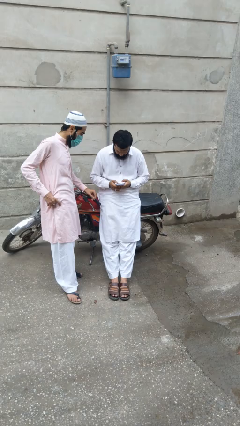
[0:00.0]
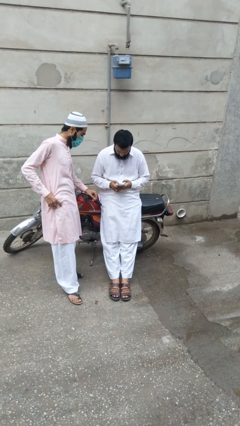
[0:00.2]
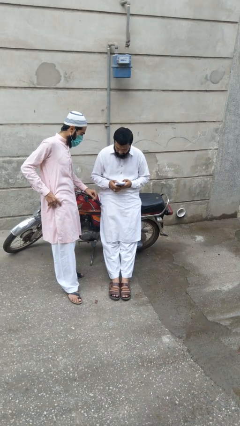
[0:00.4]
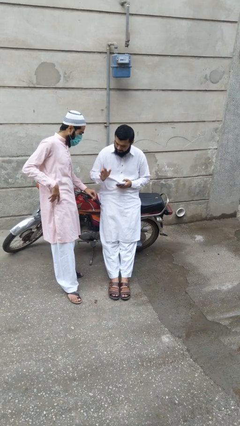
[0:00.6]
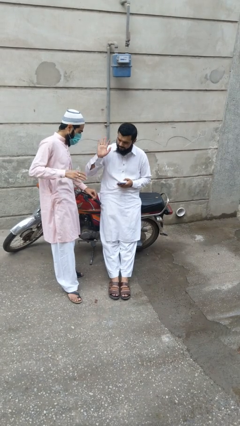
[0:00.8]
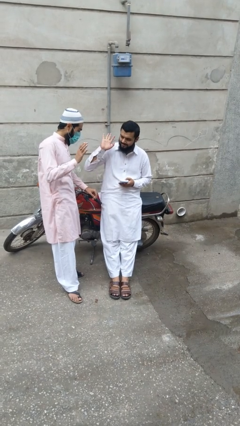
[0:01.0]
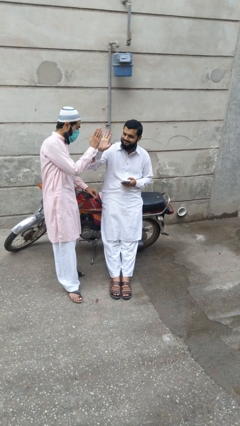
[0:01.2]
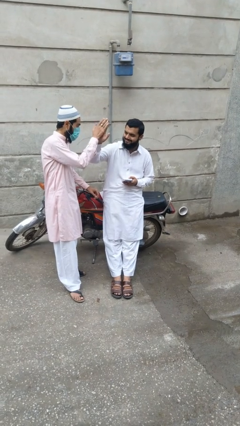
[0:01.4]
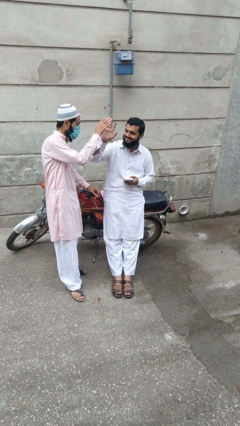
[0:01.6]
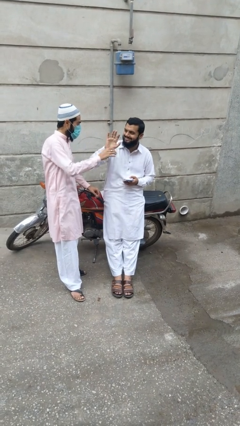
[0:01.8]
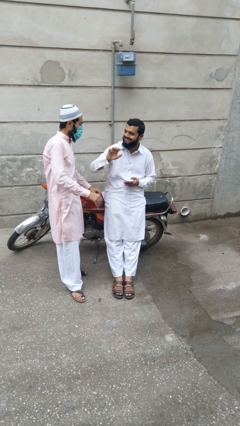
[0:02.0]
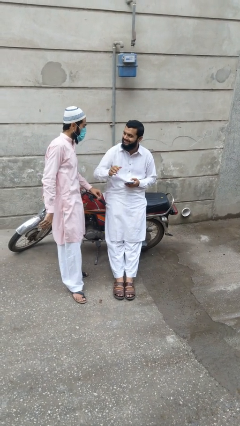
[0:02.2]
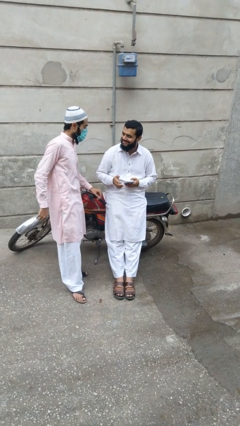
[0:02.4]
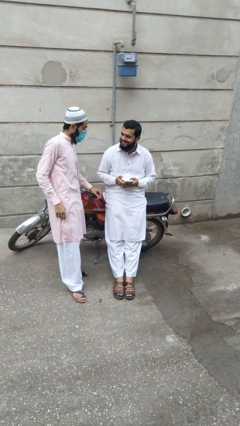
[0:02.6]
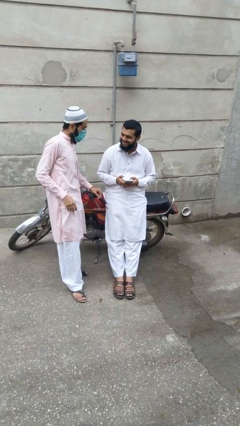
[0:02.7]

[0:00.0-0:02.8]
person highfives hand

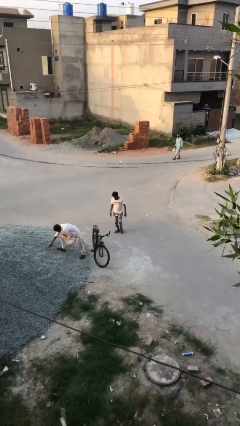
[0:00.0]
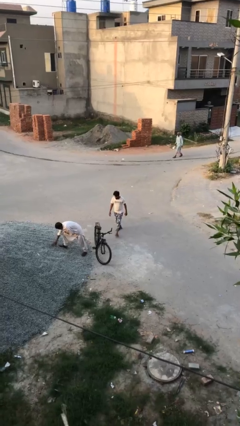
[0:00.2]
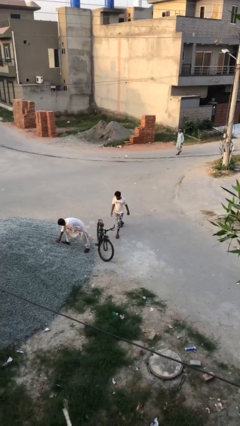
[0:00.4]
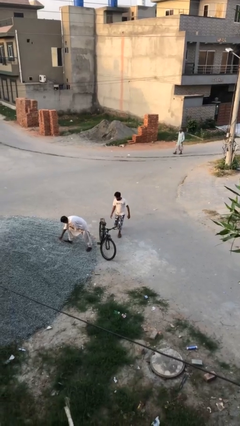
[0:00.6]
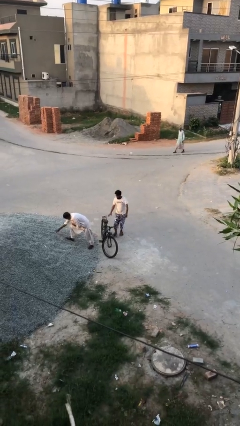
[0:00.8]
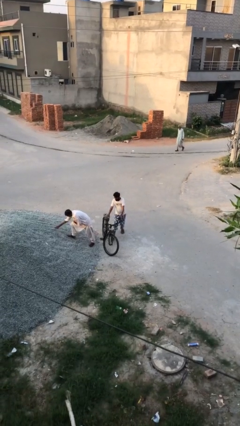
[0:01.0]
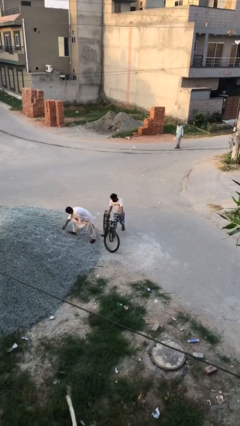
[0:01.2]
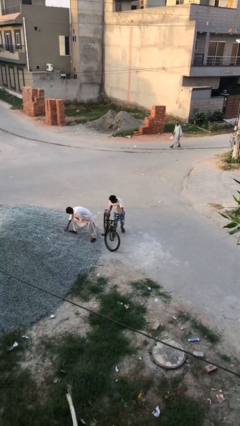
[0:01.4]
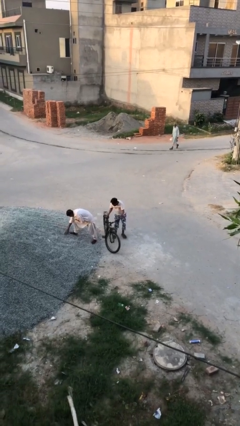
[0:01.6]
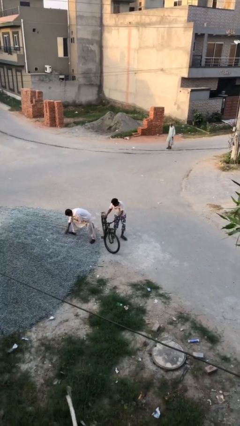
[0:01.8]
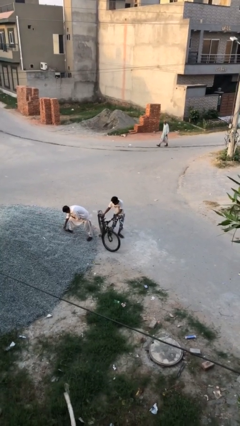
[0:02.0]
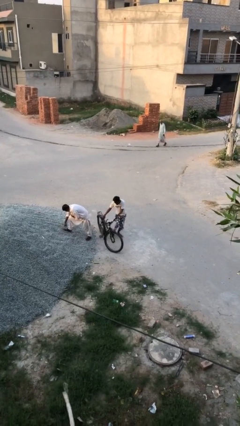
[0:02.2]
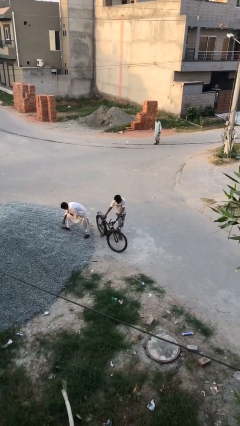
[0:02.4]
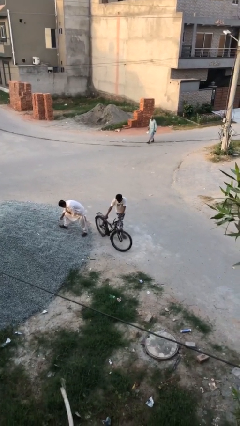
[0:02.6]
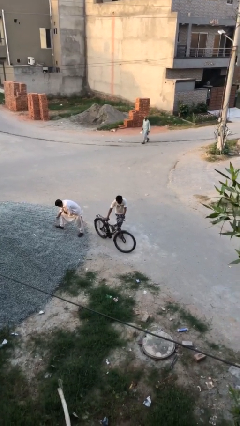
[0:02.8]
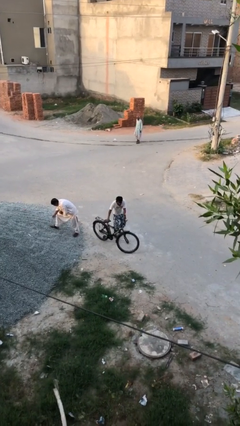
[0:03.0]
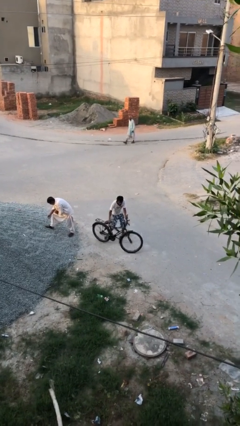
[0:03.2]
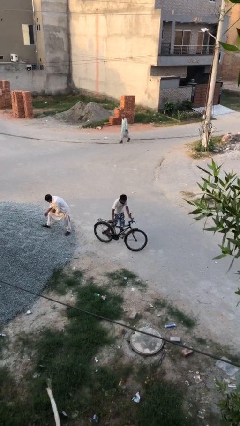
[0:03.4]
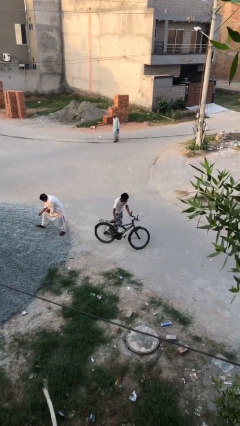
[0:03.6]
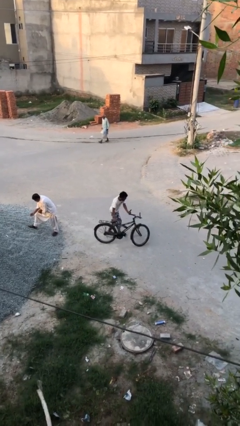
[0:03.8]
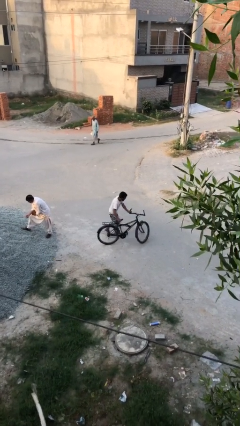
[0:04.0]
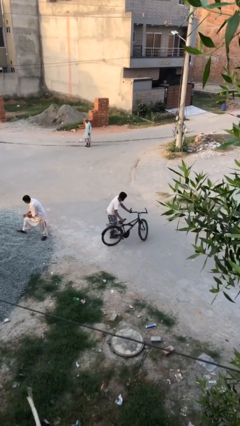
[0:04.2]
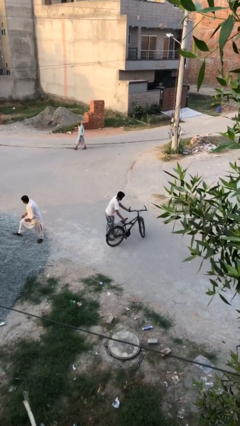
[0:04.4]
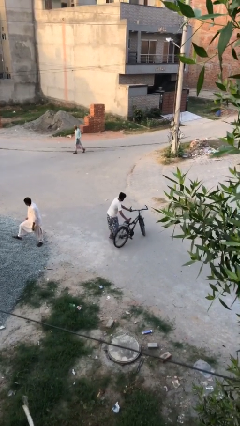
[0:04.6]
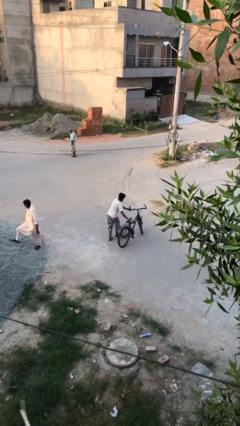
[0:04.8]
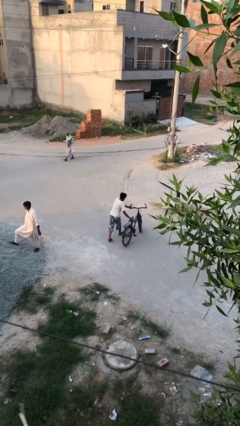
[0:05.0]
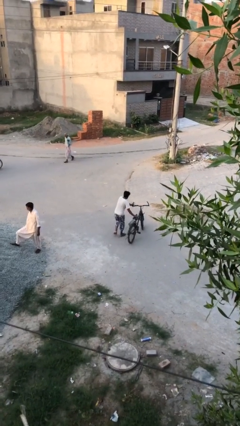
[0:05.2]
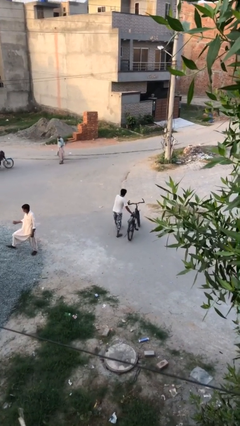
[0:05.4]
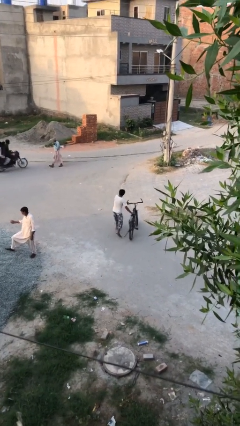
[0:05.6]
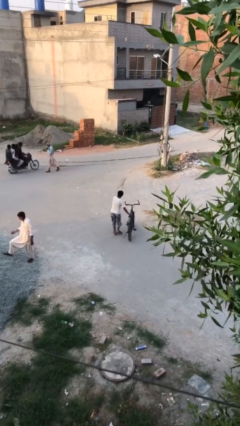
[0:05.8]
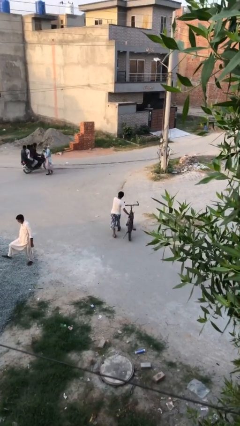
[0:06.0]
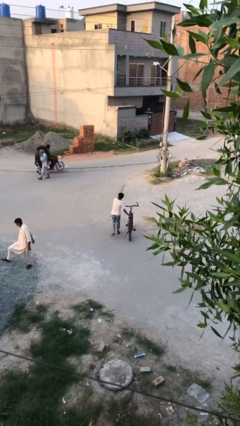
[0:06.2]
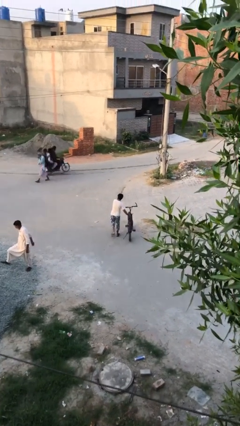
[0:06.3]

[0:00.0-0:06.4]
person steals object from person

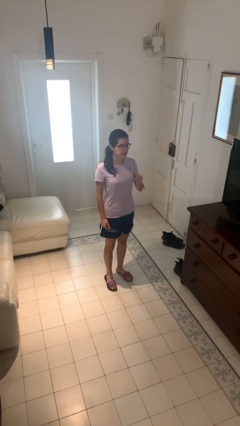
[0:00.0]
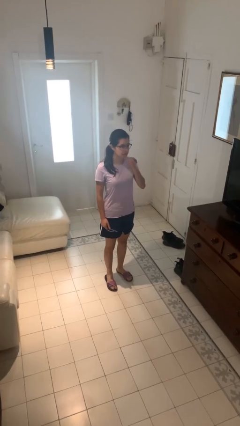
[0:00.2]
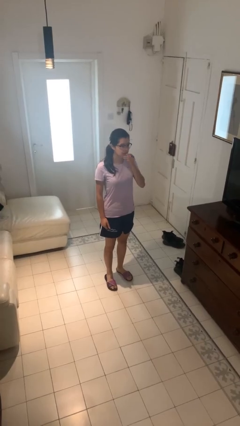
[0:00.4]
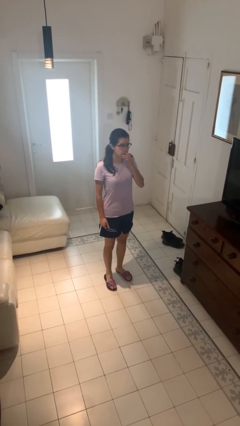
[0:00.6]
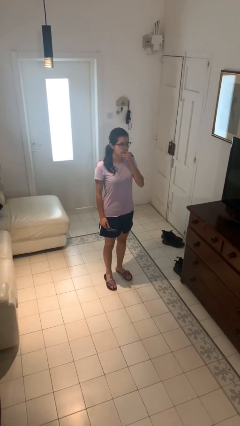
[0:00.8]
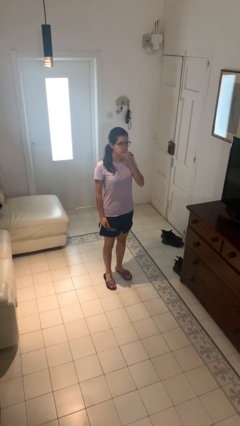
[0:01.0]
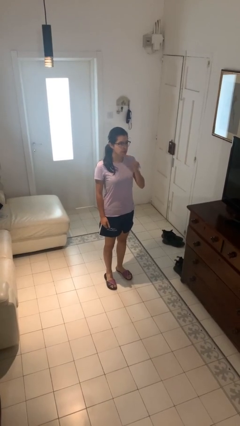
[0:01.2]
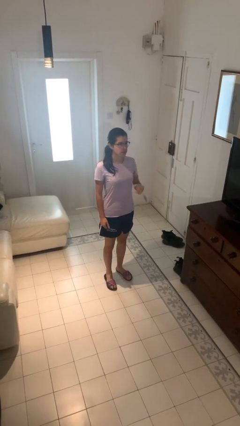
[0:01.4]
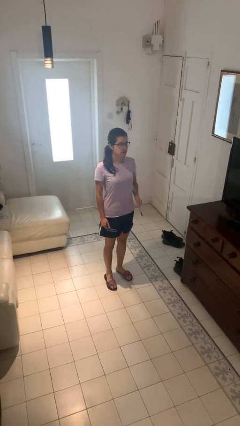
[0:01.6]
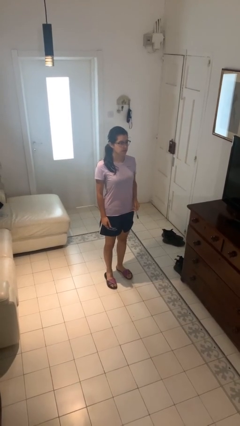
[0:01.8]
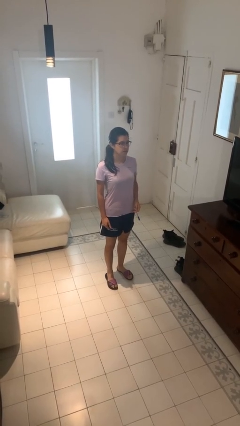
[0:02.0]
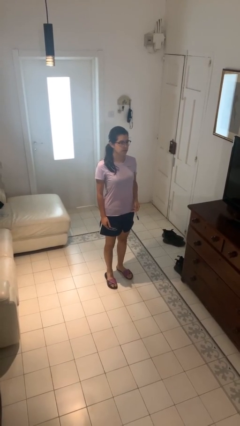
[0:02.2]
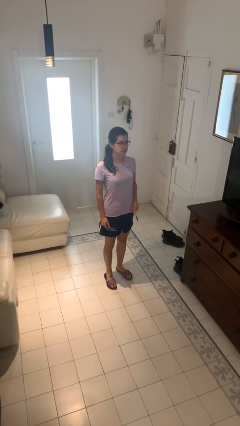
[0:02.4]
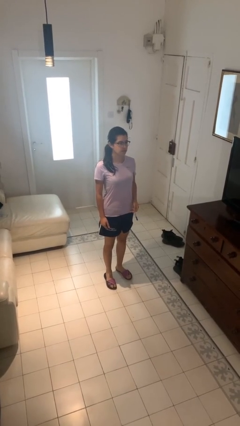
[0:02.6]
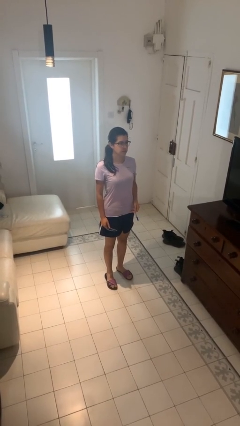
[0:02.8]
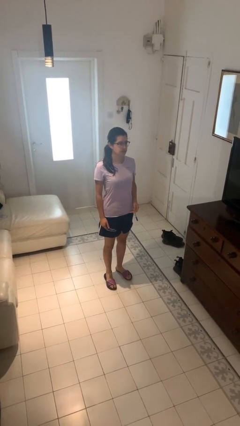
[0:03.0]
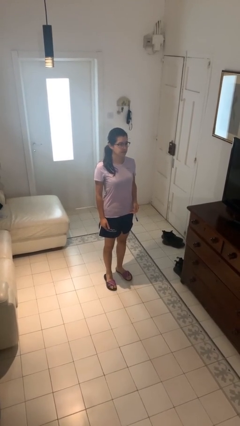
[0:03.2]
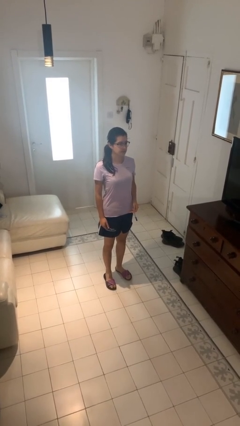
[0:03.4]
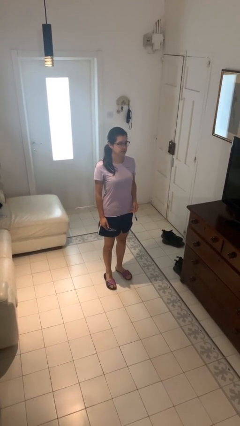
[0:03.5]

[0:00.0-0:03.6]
person vapes

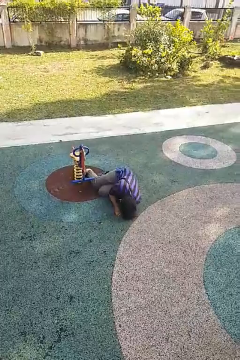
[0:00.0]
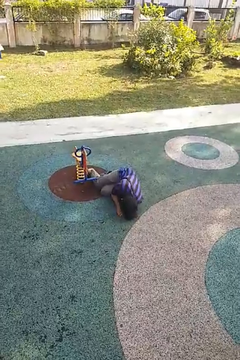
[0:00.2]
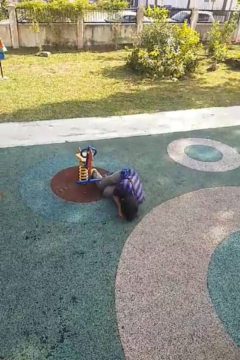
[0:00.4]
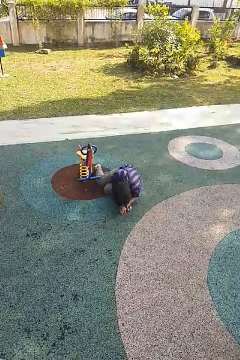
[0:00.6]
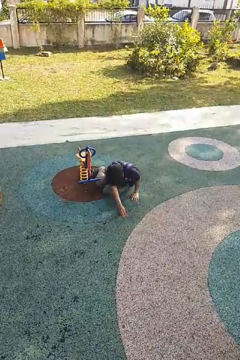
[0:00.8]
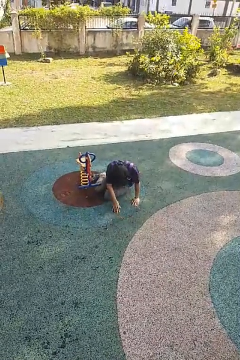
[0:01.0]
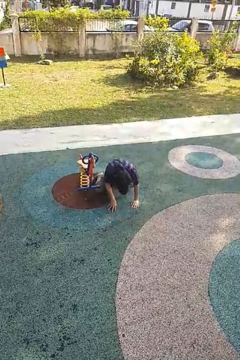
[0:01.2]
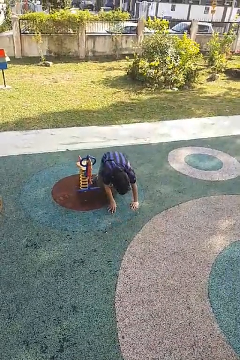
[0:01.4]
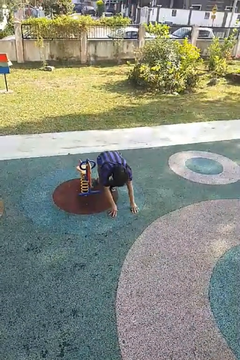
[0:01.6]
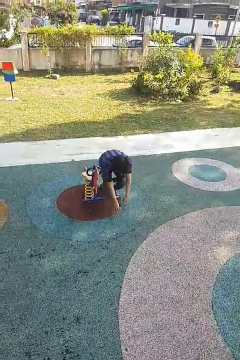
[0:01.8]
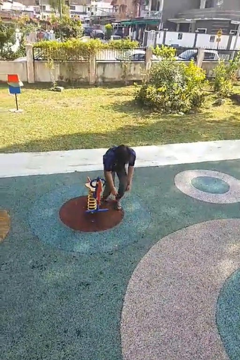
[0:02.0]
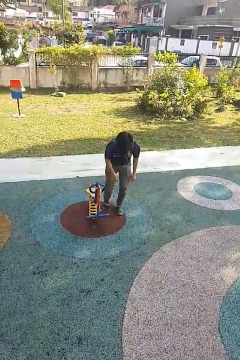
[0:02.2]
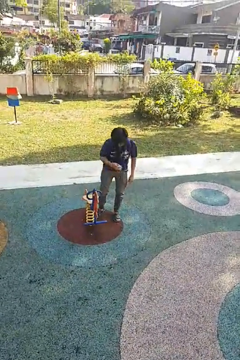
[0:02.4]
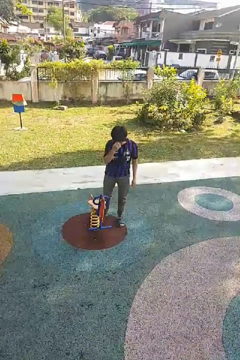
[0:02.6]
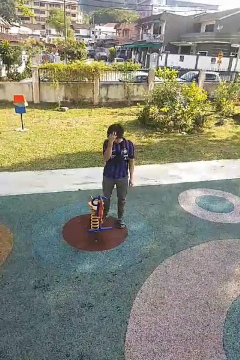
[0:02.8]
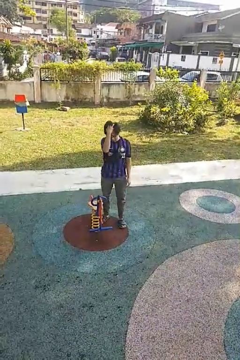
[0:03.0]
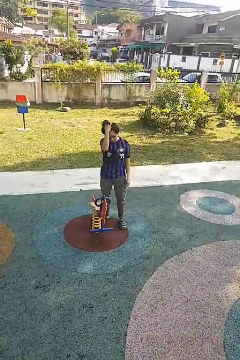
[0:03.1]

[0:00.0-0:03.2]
person stands up from floor

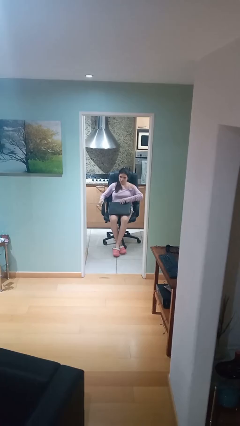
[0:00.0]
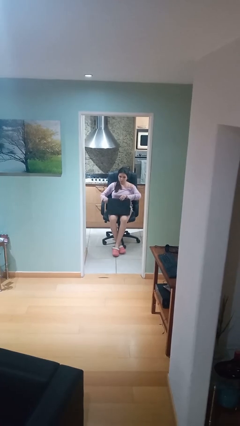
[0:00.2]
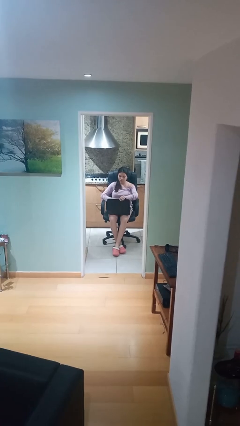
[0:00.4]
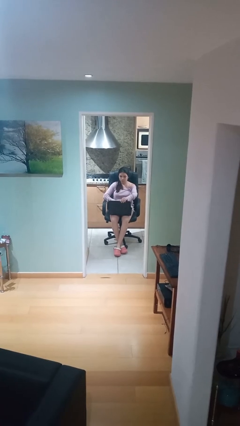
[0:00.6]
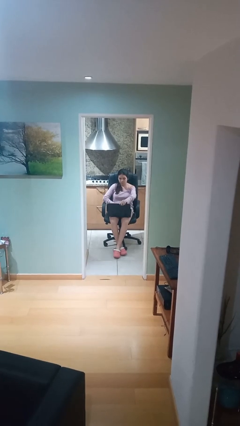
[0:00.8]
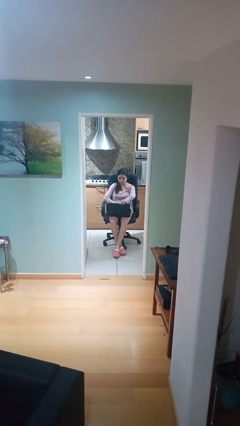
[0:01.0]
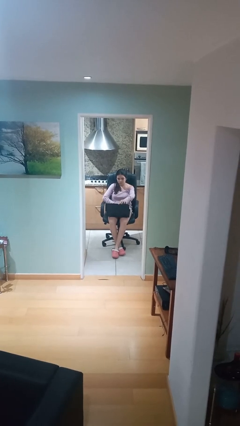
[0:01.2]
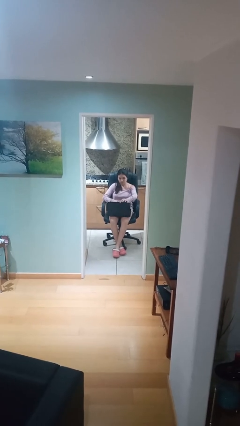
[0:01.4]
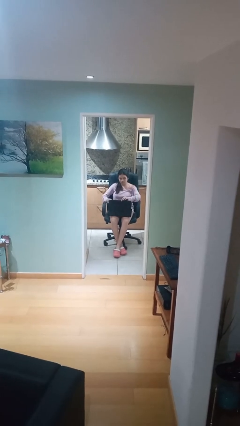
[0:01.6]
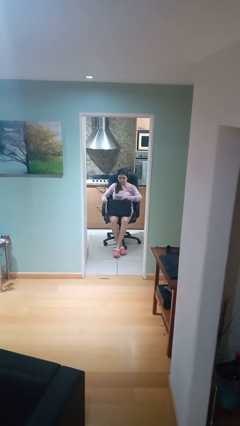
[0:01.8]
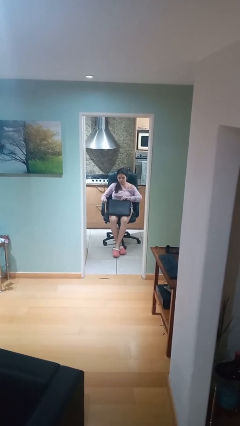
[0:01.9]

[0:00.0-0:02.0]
person interacts with laptop

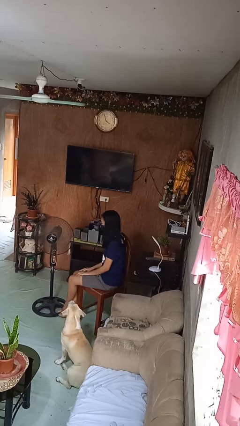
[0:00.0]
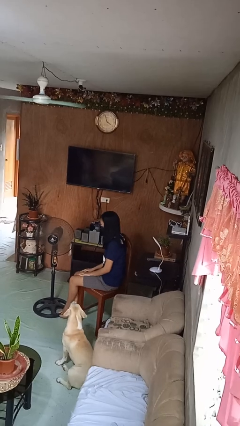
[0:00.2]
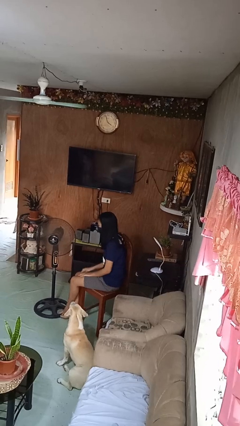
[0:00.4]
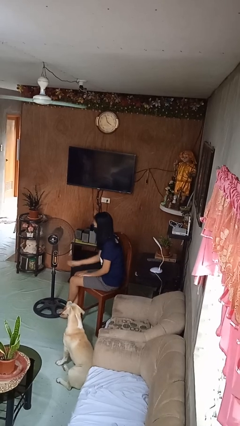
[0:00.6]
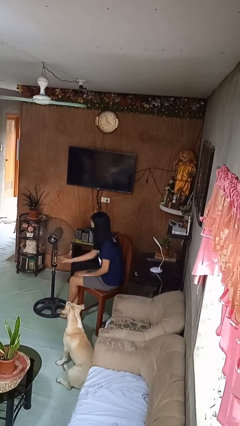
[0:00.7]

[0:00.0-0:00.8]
person turns on fan
